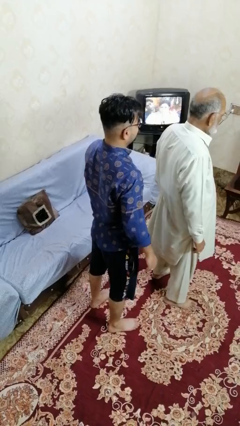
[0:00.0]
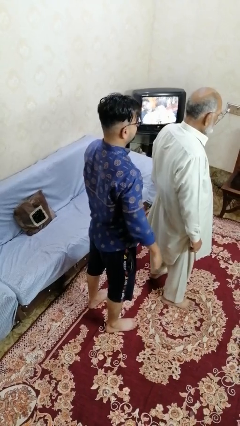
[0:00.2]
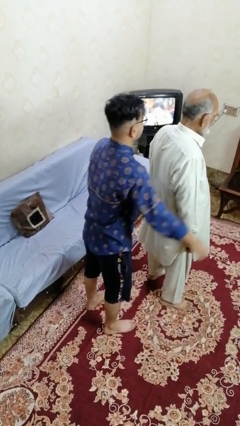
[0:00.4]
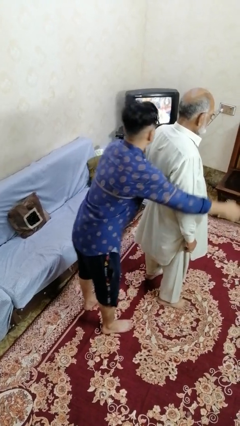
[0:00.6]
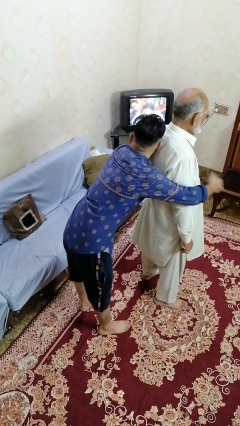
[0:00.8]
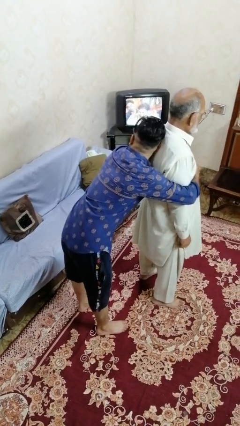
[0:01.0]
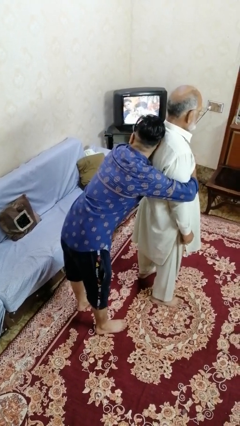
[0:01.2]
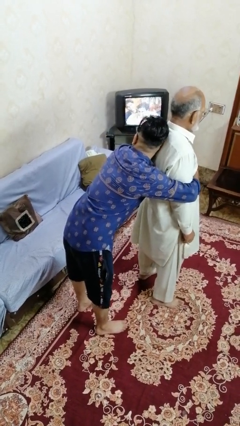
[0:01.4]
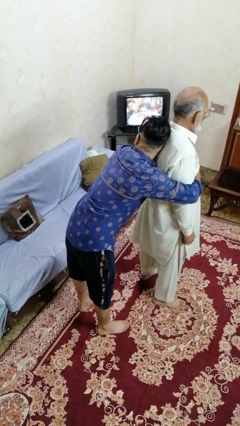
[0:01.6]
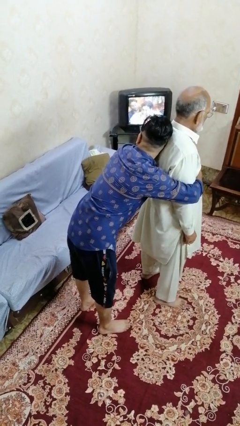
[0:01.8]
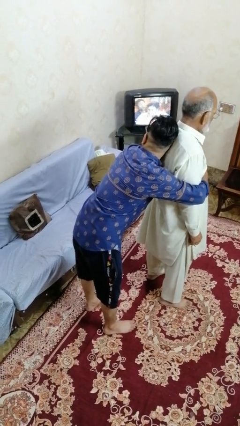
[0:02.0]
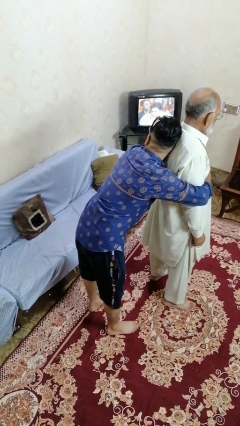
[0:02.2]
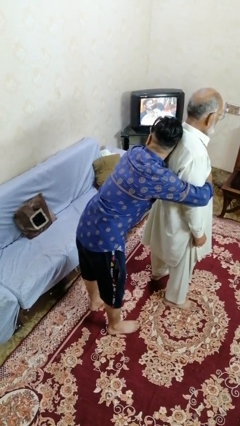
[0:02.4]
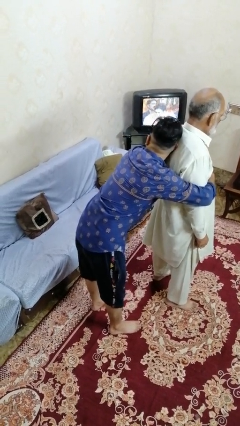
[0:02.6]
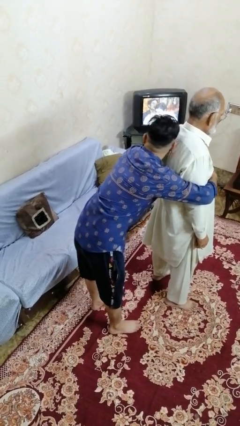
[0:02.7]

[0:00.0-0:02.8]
person hugs person from behind

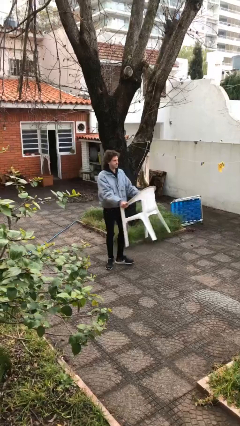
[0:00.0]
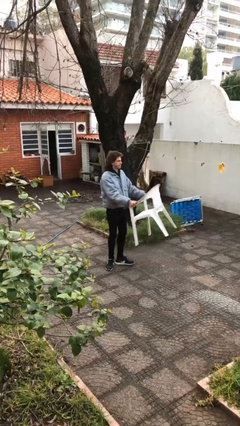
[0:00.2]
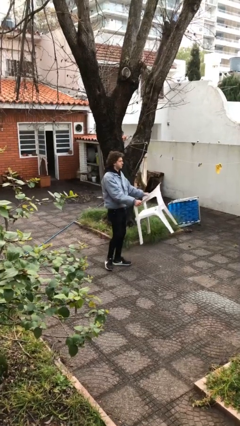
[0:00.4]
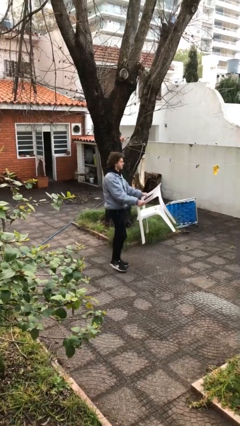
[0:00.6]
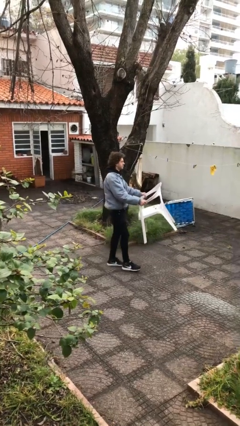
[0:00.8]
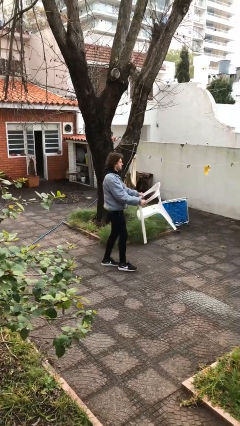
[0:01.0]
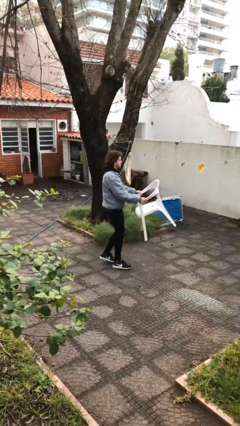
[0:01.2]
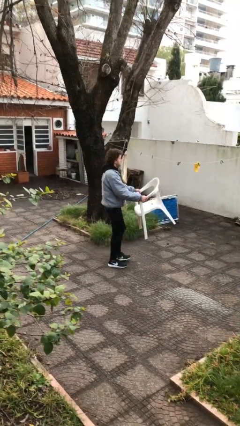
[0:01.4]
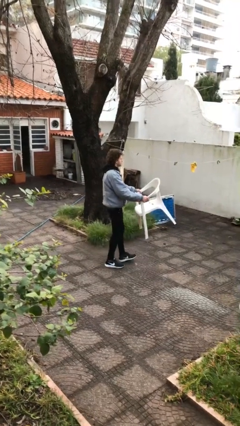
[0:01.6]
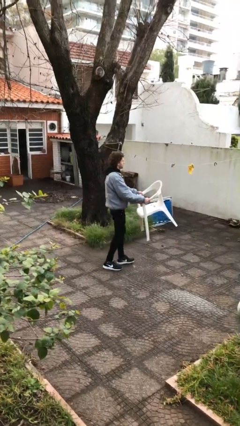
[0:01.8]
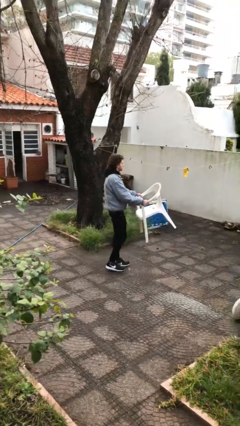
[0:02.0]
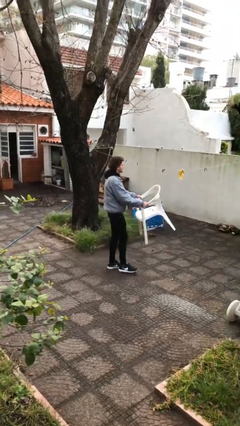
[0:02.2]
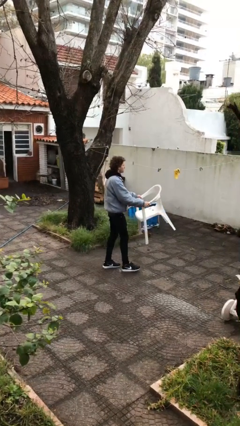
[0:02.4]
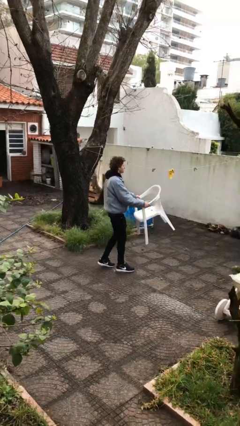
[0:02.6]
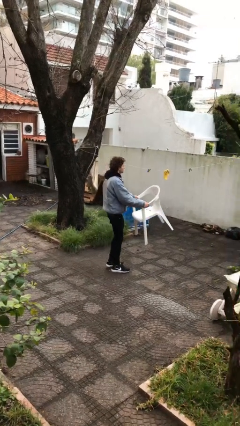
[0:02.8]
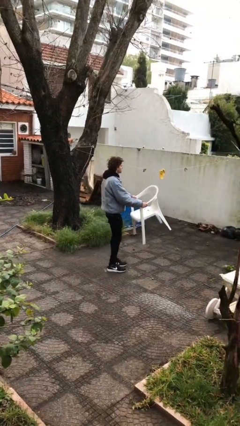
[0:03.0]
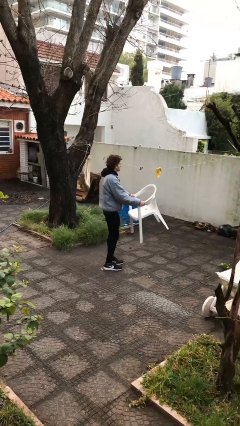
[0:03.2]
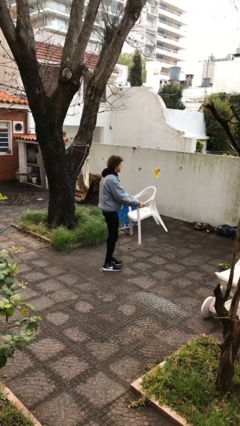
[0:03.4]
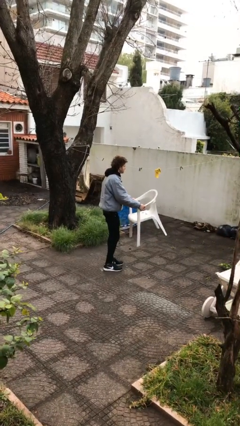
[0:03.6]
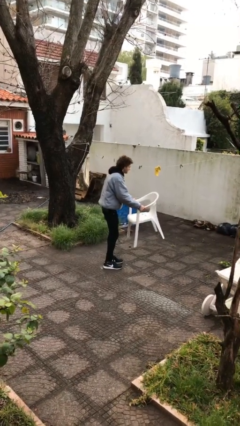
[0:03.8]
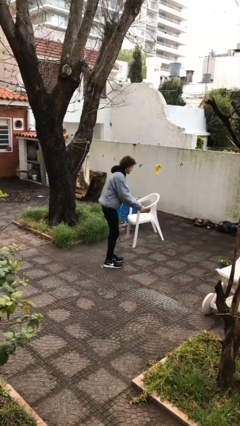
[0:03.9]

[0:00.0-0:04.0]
person carries heavy object

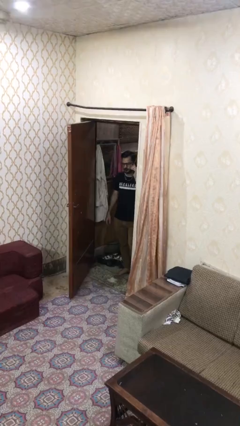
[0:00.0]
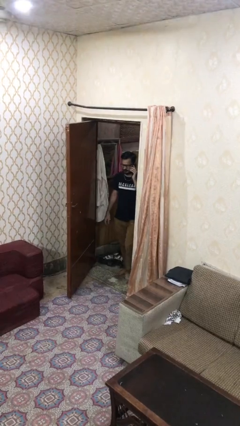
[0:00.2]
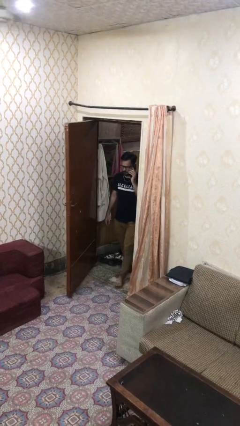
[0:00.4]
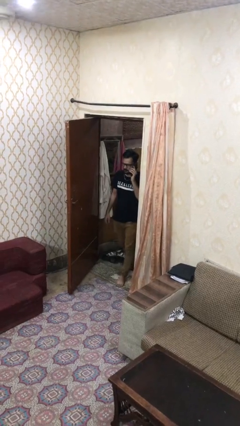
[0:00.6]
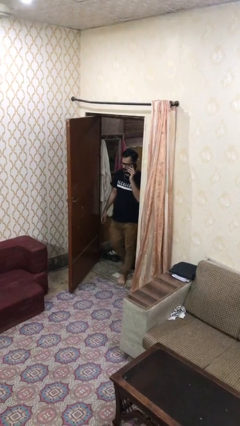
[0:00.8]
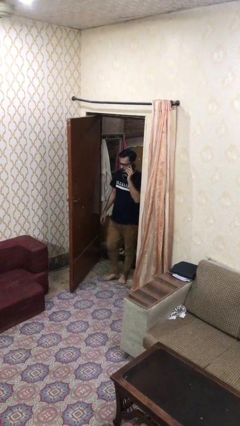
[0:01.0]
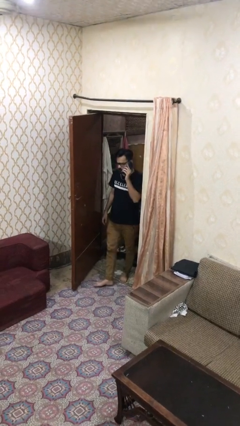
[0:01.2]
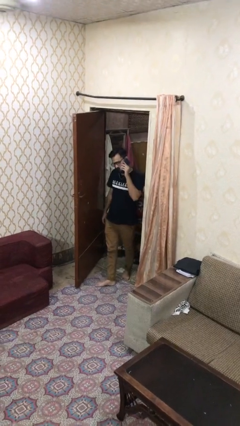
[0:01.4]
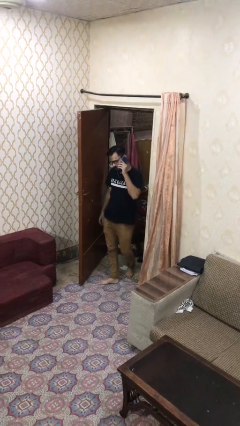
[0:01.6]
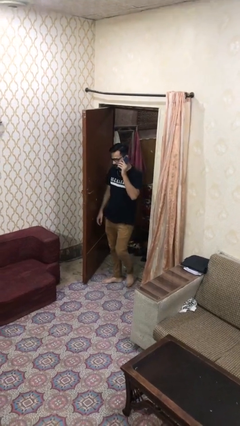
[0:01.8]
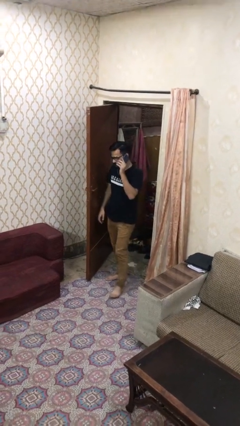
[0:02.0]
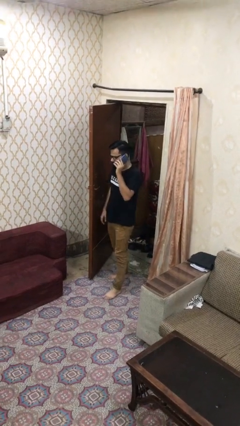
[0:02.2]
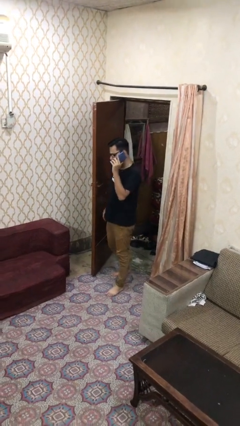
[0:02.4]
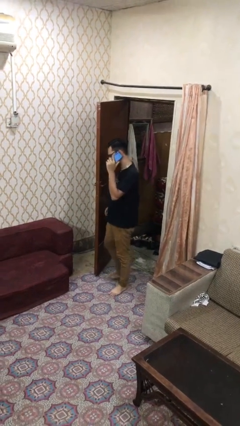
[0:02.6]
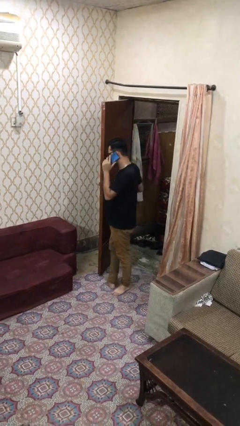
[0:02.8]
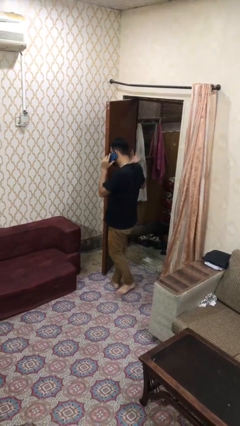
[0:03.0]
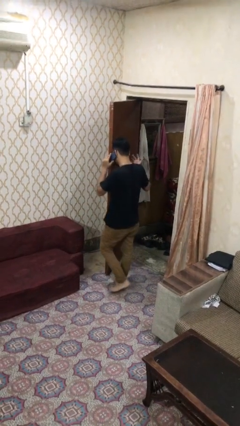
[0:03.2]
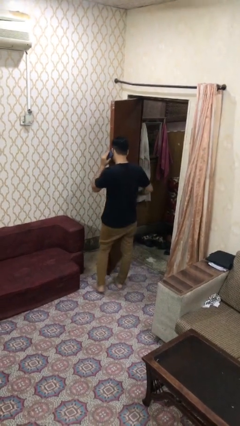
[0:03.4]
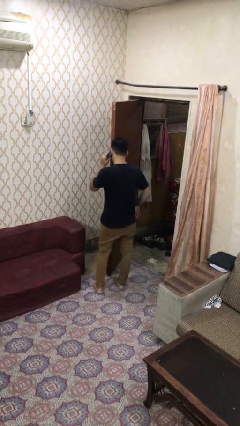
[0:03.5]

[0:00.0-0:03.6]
person enters scene through structure

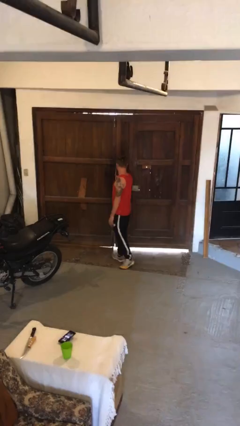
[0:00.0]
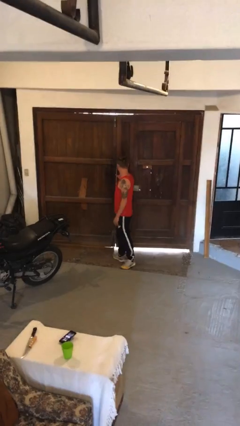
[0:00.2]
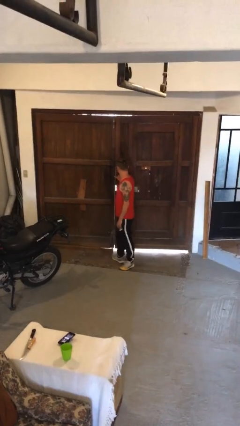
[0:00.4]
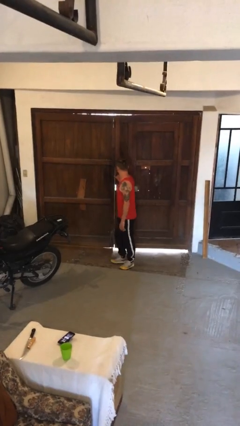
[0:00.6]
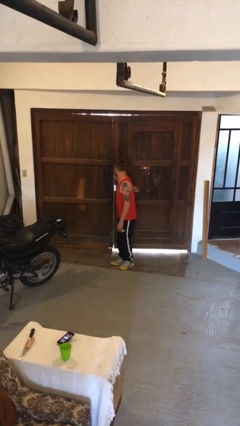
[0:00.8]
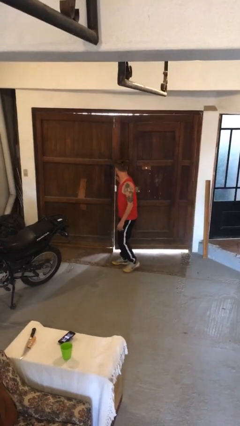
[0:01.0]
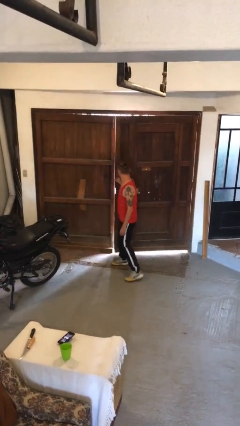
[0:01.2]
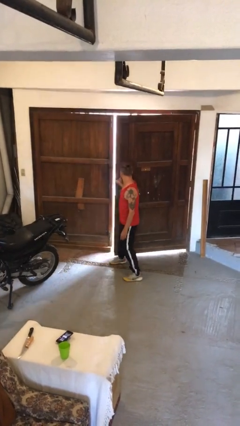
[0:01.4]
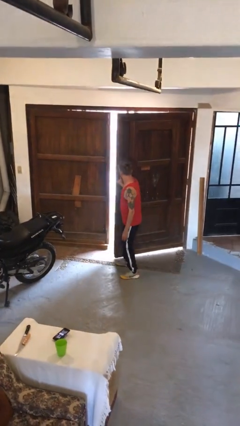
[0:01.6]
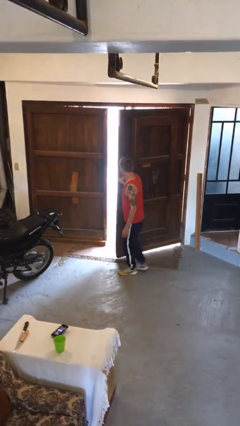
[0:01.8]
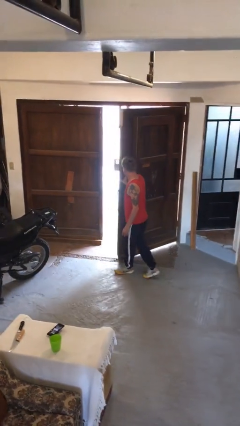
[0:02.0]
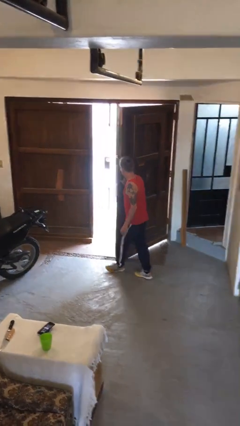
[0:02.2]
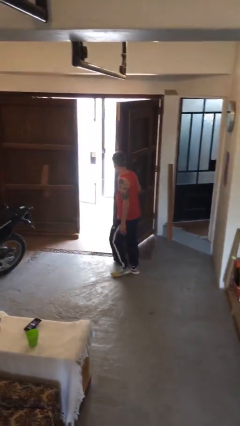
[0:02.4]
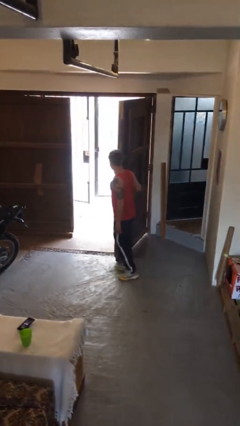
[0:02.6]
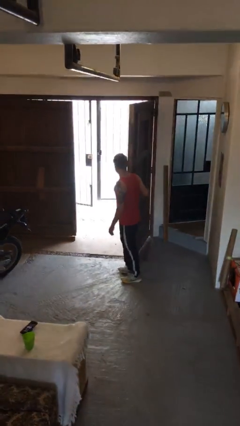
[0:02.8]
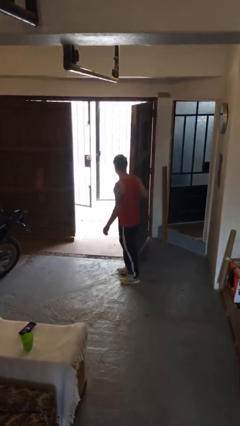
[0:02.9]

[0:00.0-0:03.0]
person opens gate

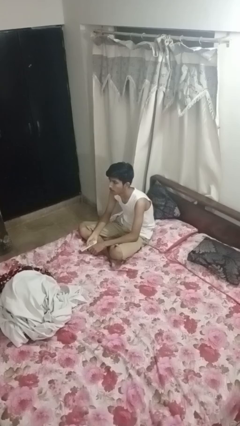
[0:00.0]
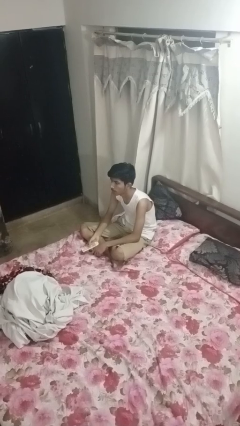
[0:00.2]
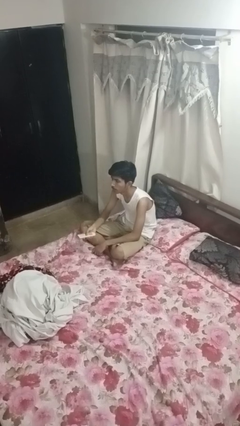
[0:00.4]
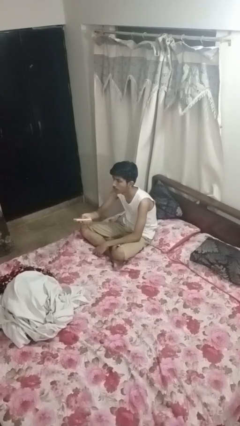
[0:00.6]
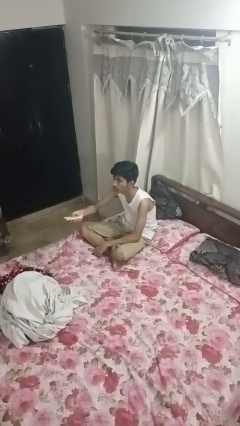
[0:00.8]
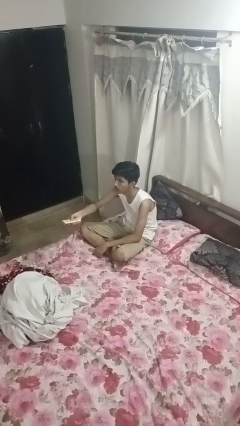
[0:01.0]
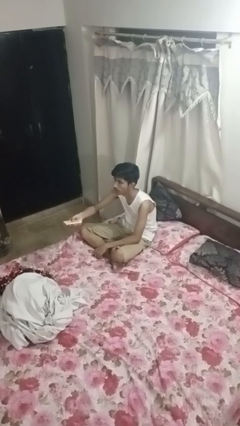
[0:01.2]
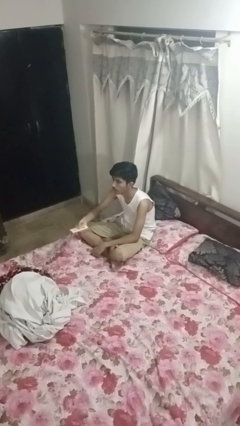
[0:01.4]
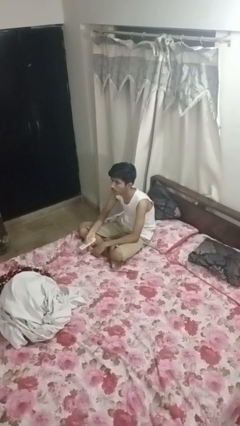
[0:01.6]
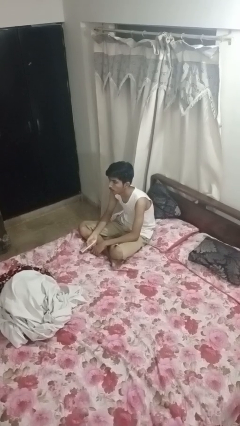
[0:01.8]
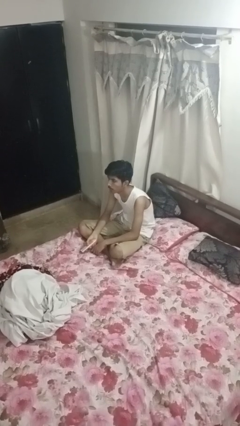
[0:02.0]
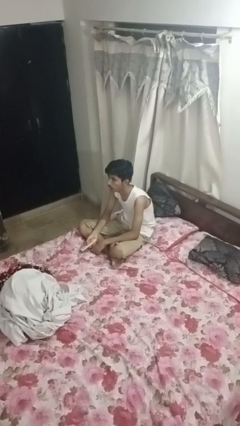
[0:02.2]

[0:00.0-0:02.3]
person uses television remote

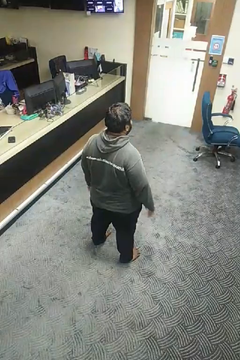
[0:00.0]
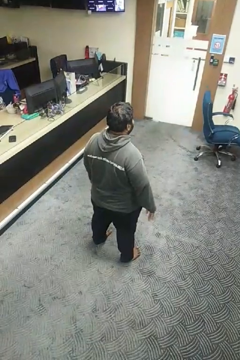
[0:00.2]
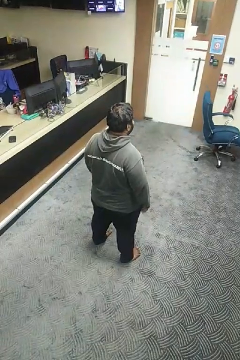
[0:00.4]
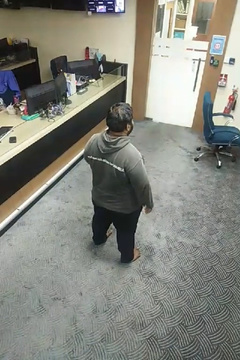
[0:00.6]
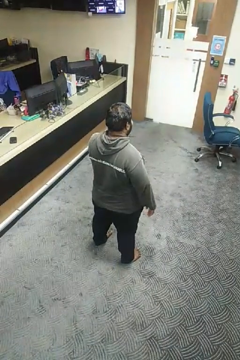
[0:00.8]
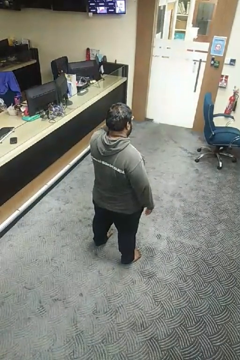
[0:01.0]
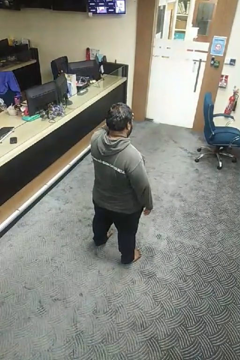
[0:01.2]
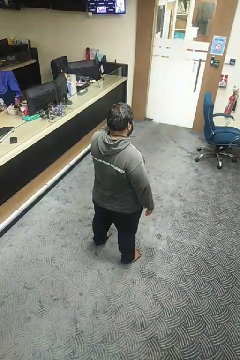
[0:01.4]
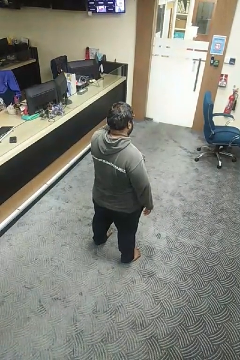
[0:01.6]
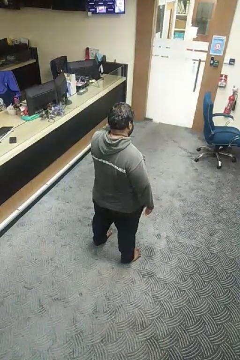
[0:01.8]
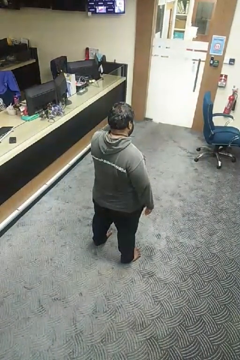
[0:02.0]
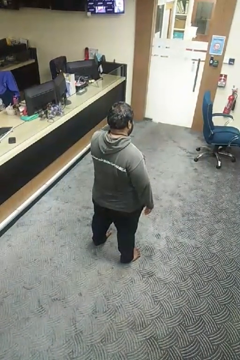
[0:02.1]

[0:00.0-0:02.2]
person rubs eyes
